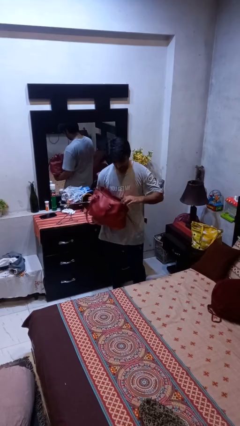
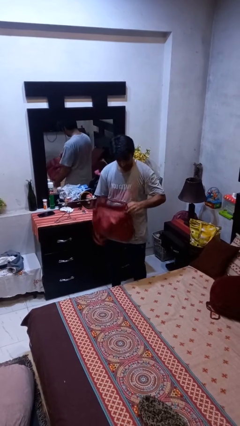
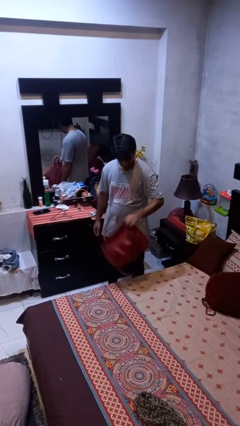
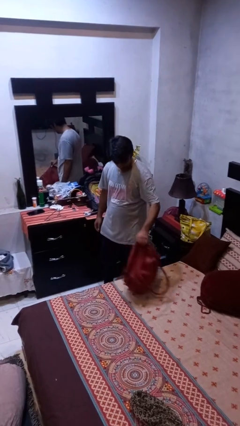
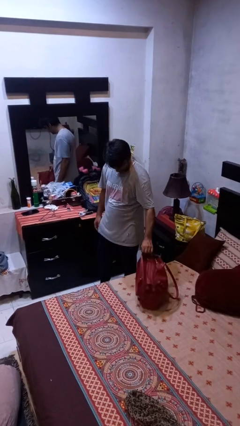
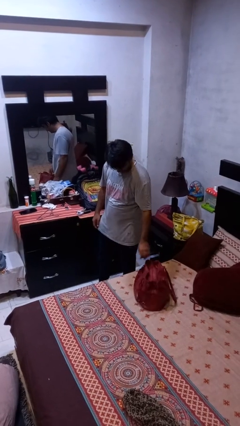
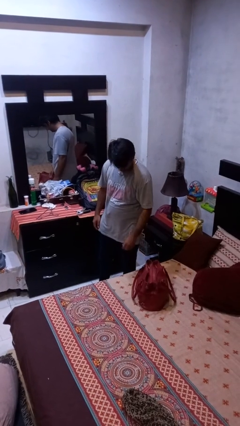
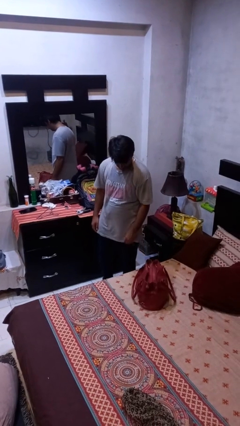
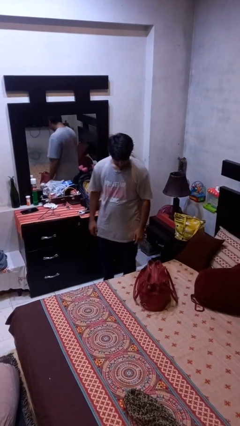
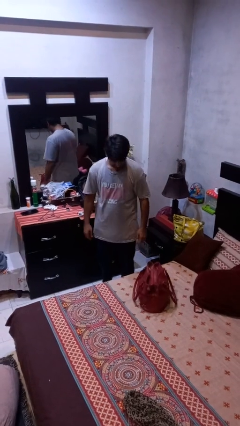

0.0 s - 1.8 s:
person puts down object on bed

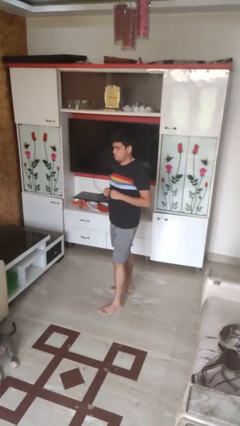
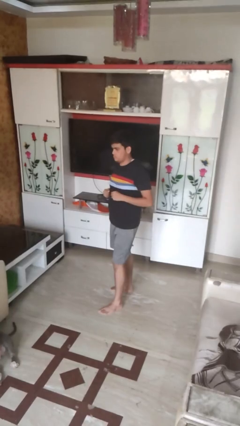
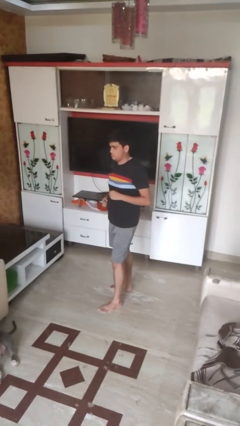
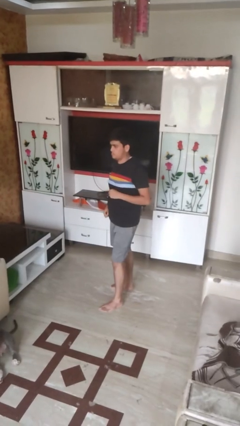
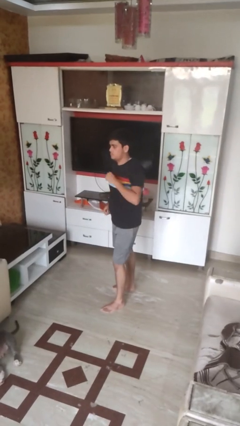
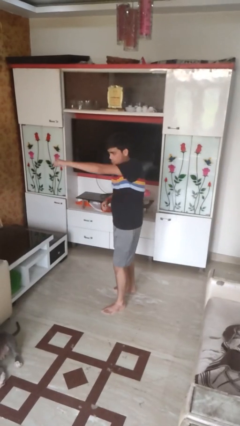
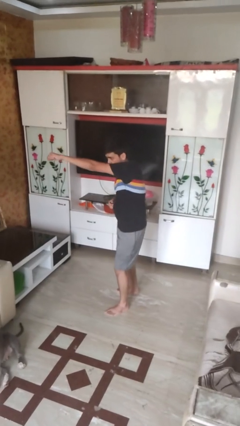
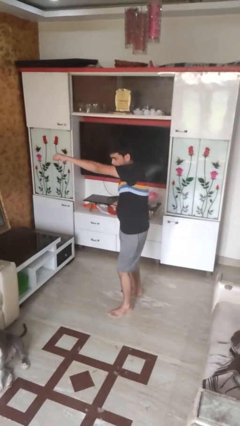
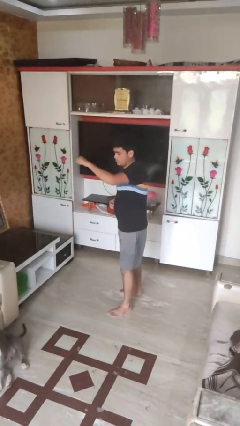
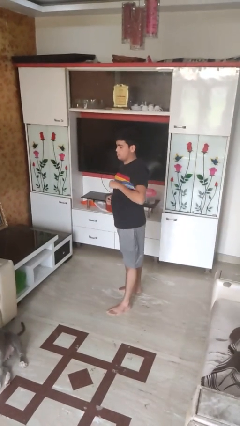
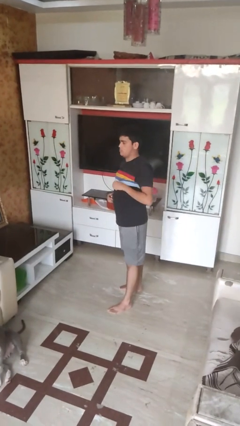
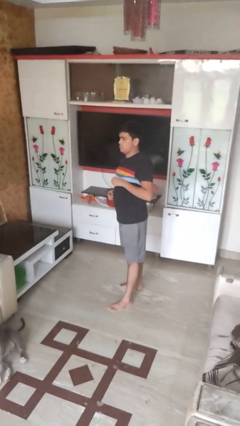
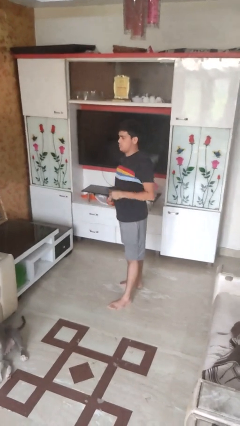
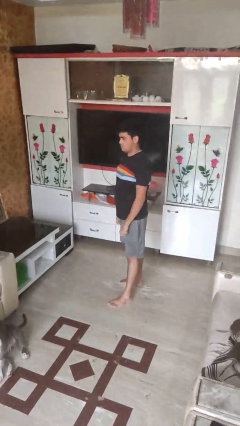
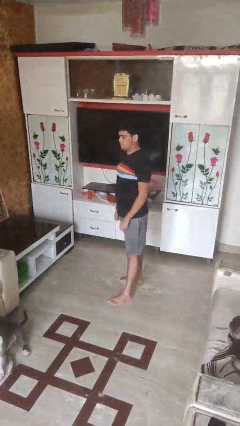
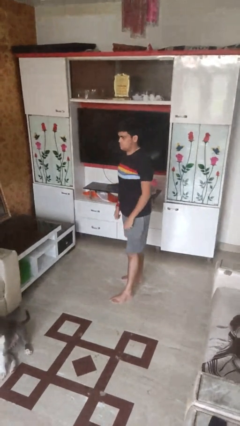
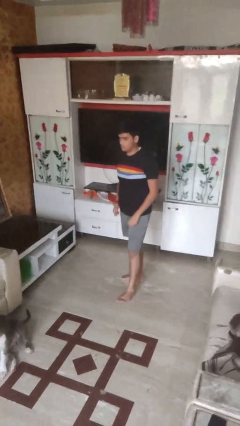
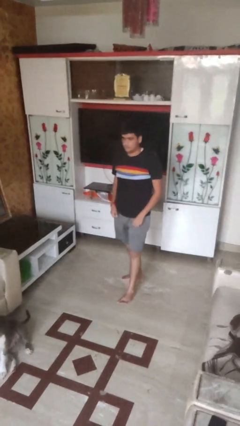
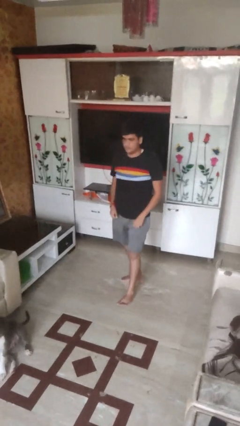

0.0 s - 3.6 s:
person punches

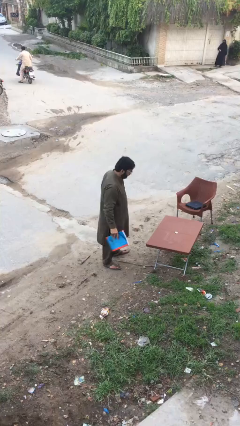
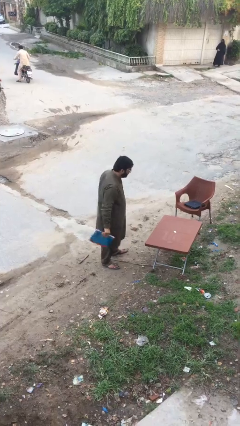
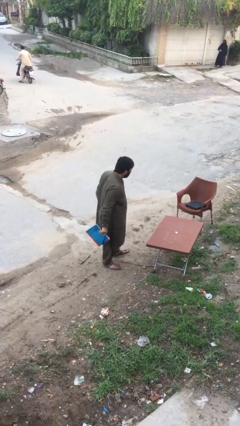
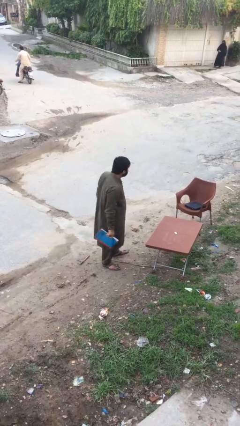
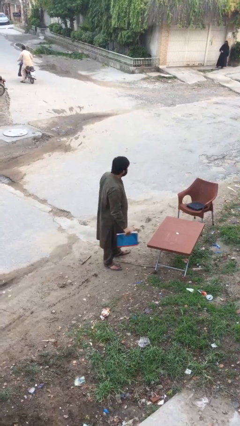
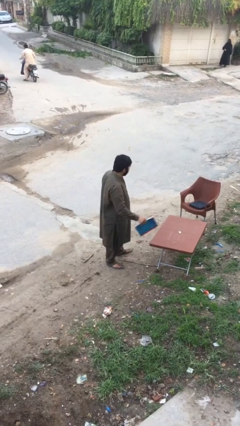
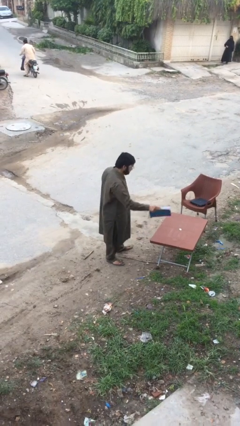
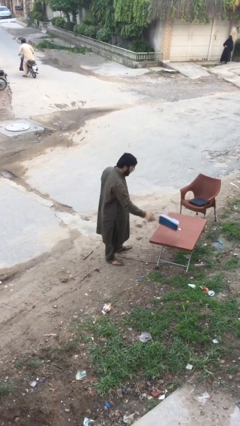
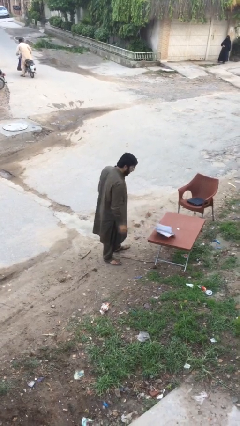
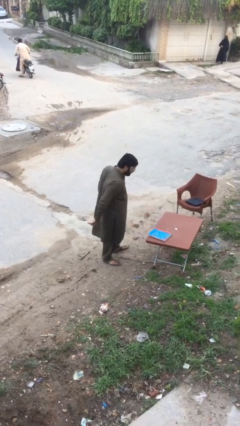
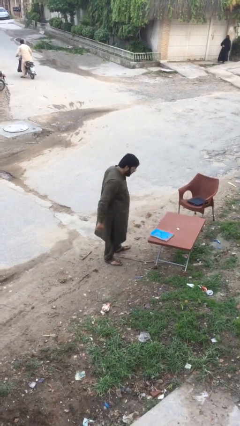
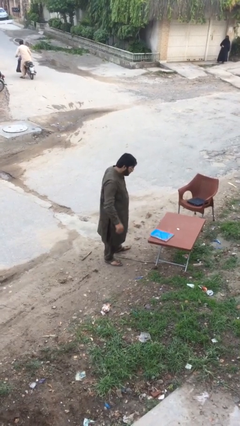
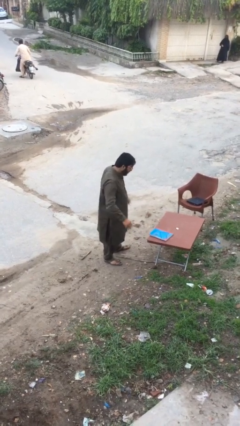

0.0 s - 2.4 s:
person puts down object on table

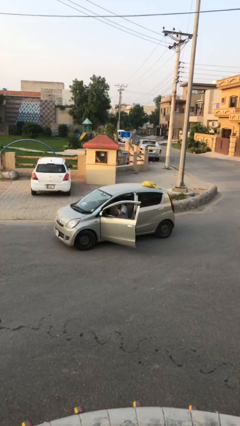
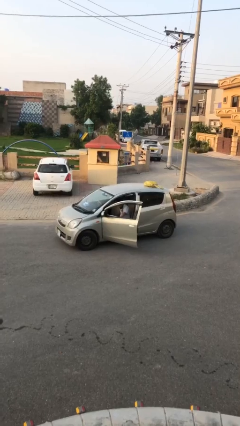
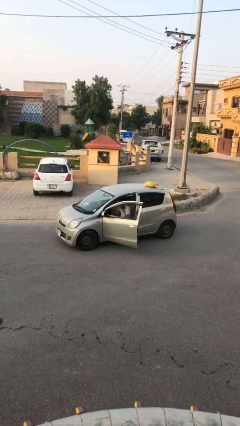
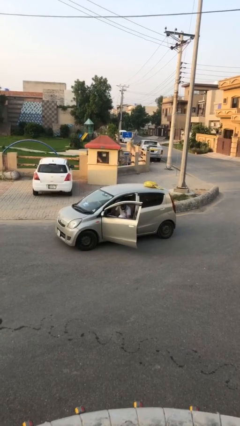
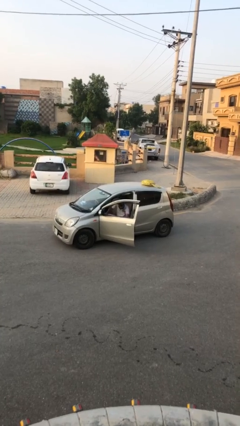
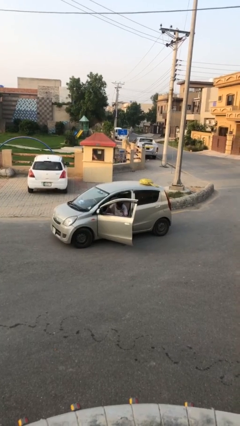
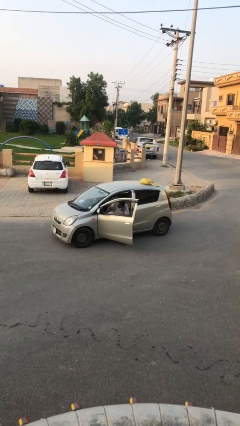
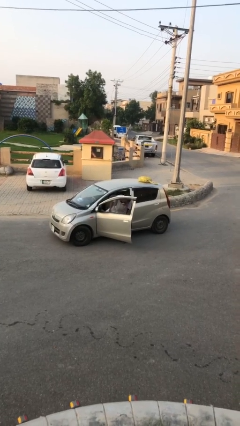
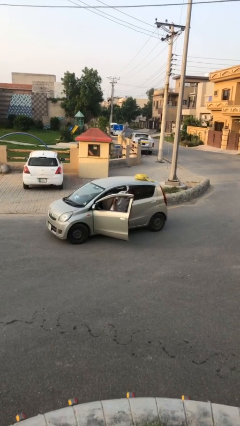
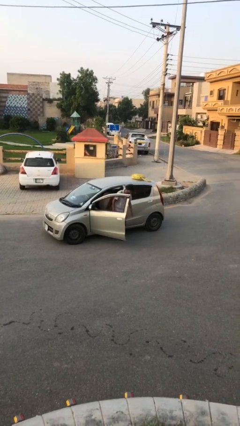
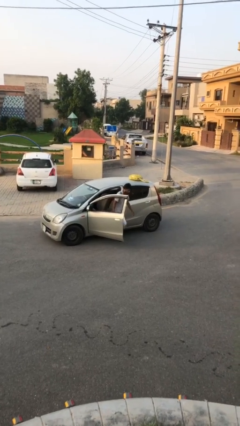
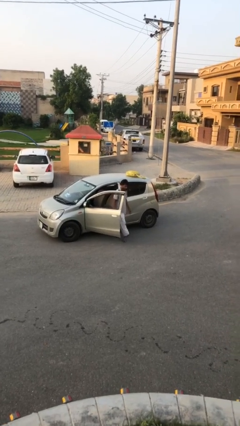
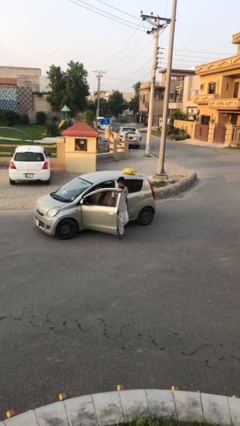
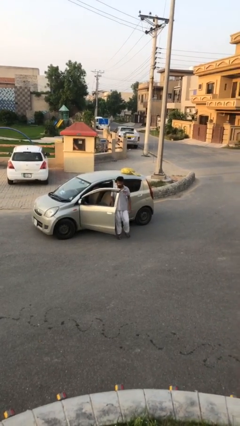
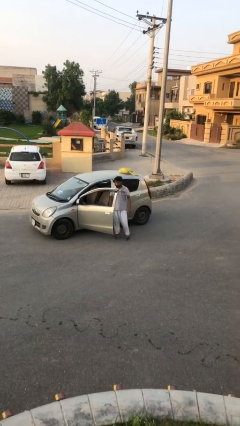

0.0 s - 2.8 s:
person exits car

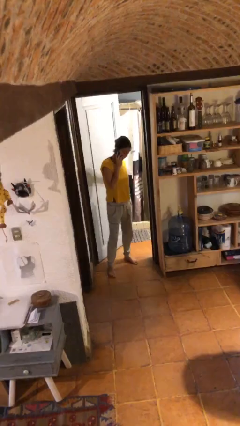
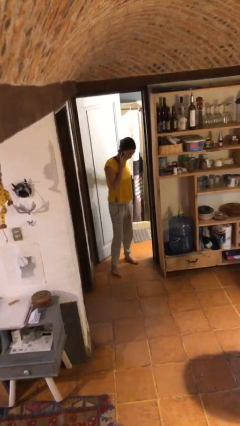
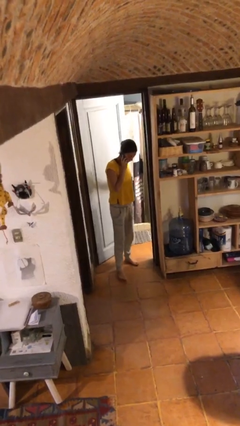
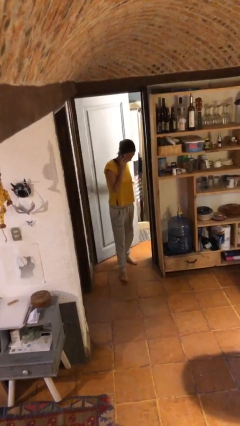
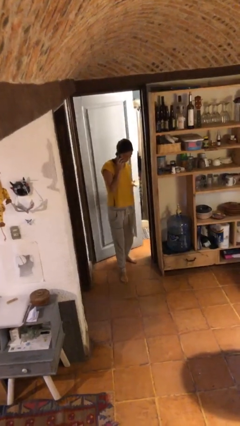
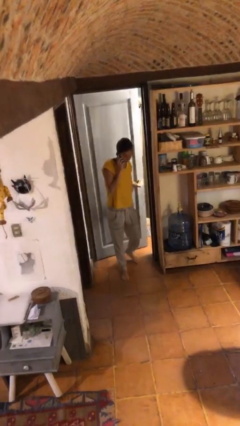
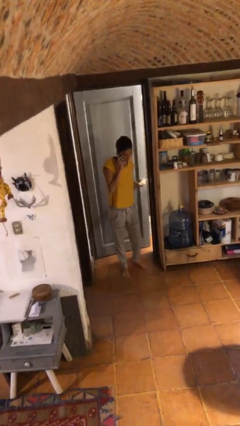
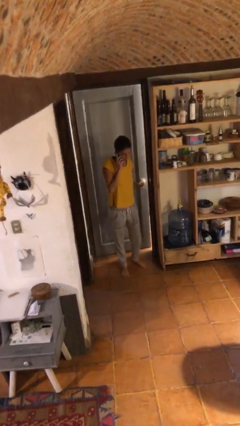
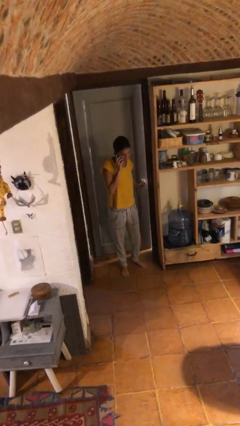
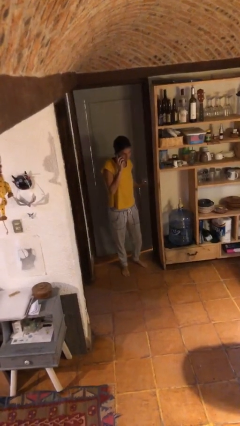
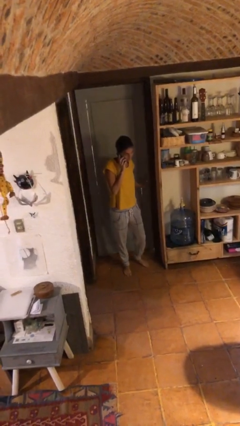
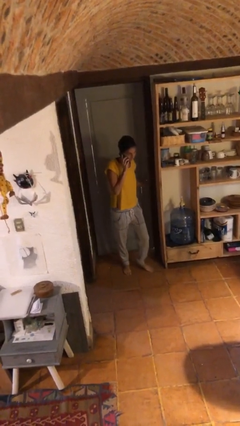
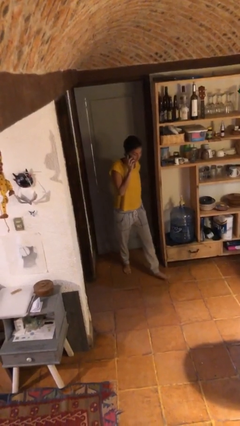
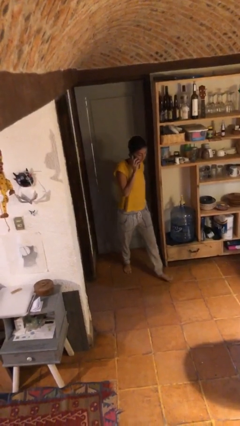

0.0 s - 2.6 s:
person closes facility door

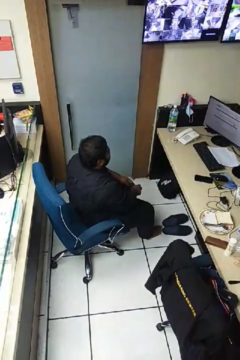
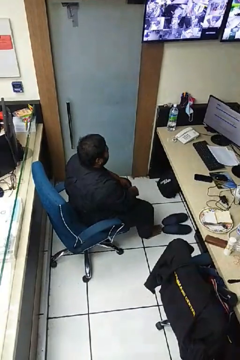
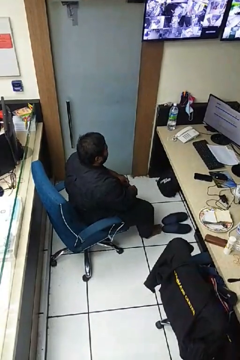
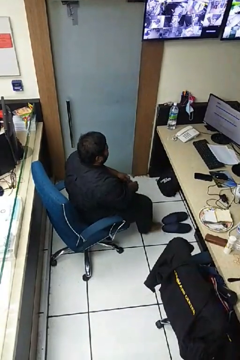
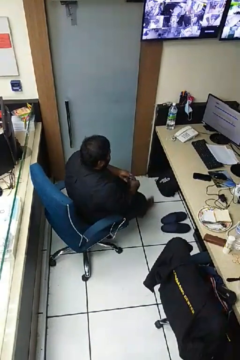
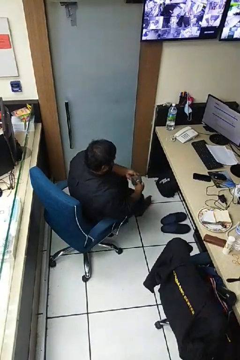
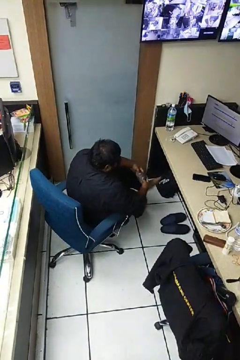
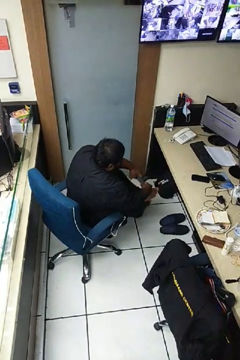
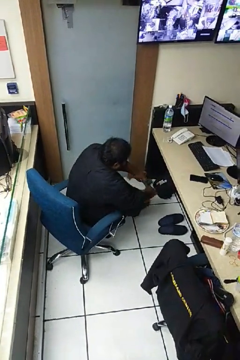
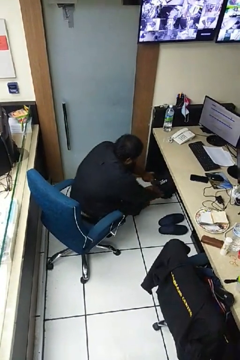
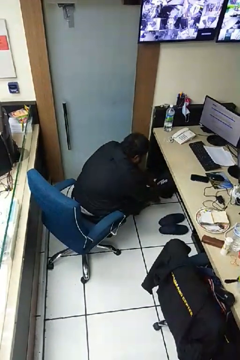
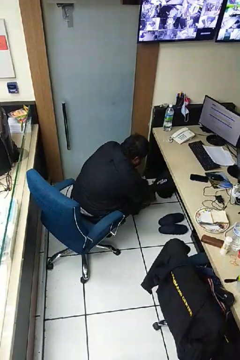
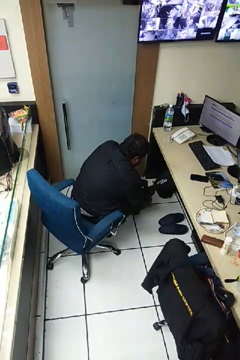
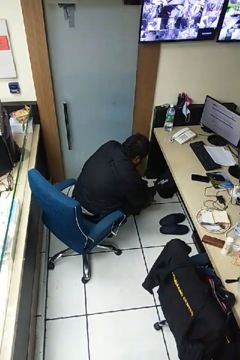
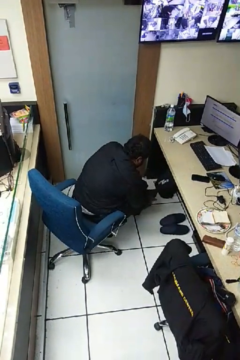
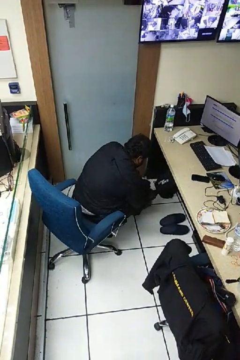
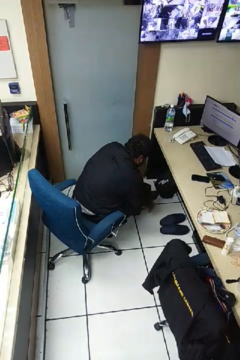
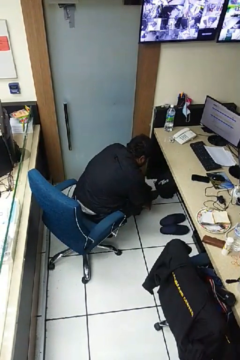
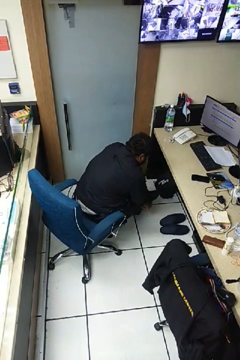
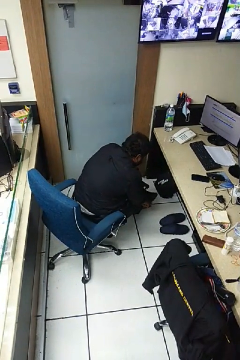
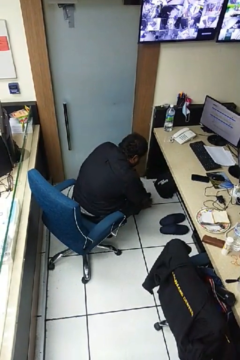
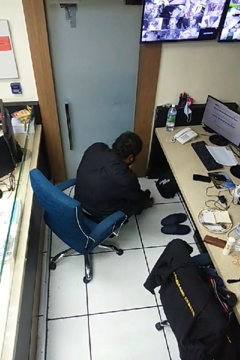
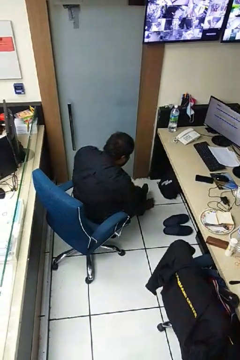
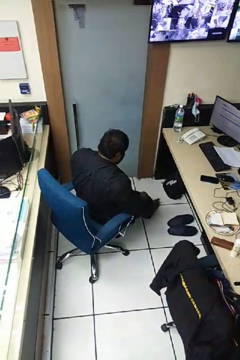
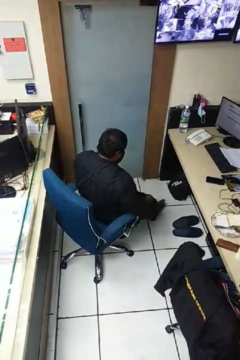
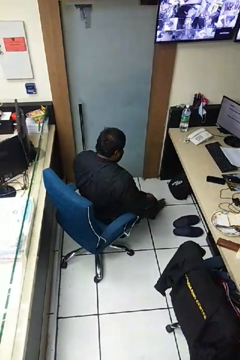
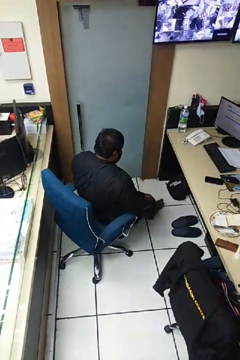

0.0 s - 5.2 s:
person puts on socks
